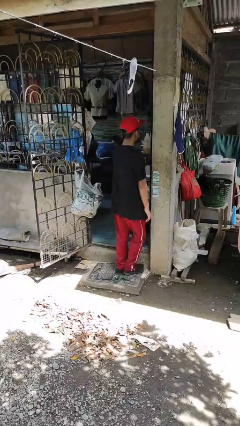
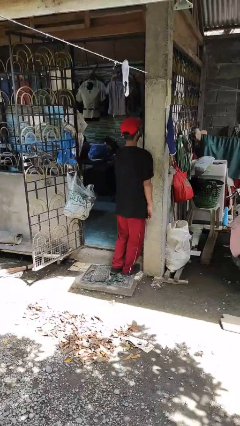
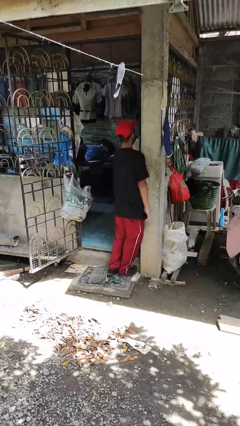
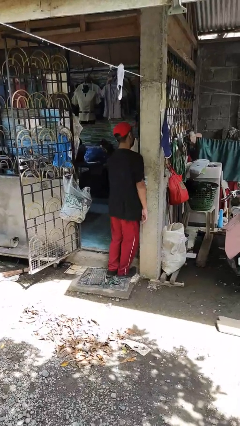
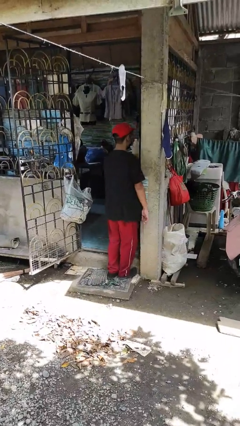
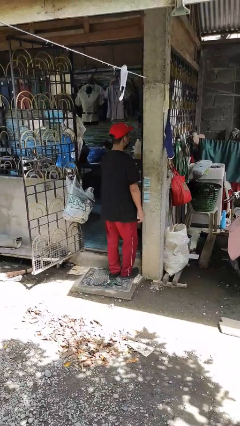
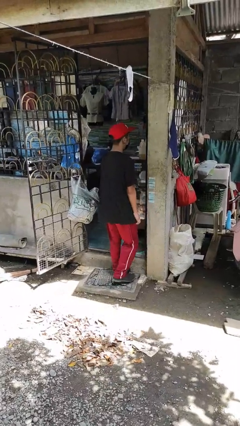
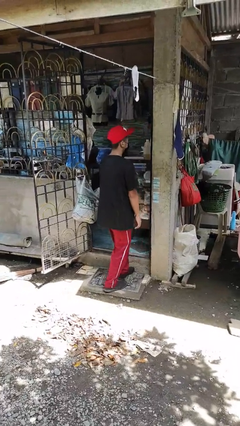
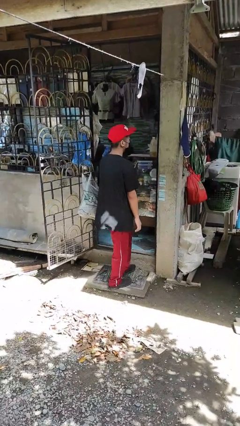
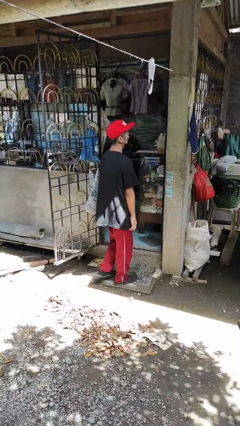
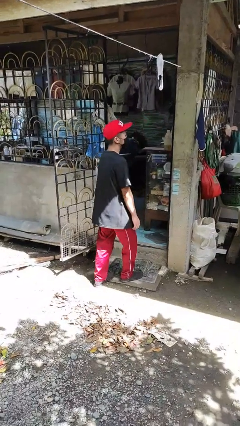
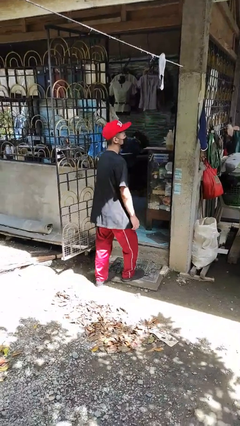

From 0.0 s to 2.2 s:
person bumps into wall

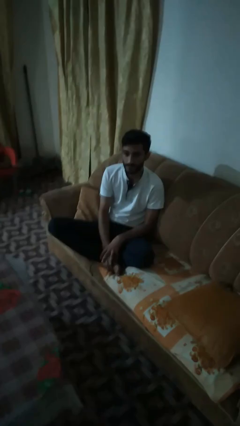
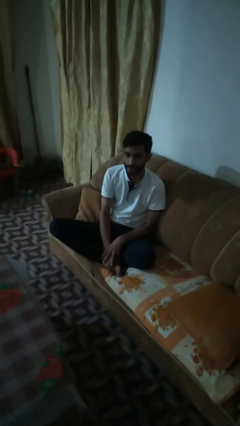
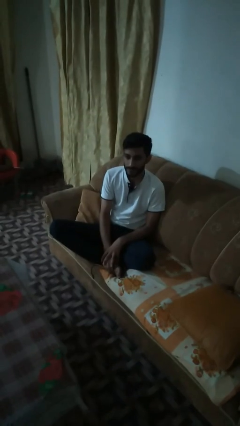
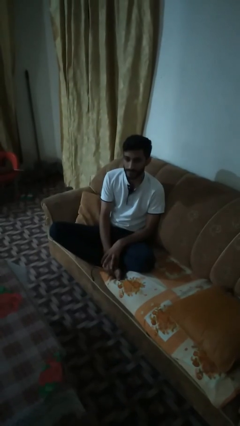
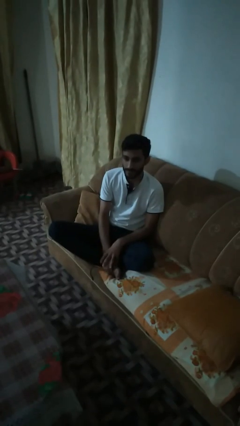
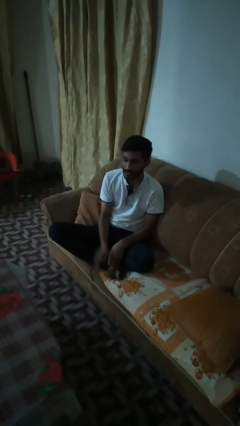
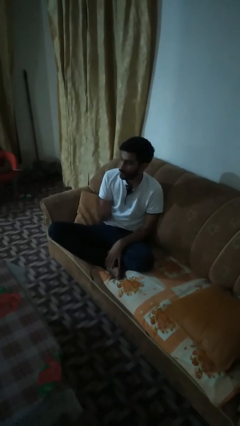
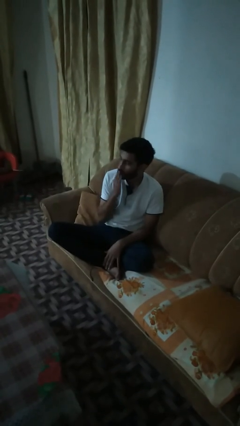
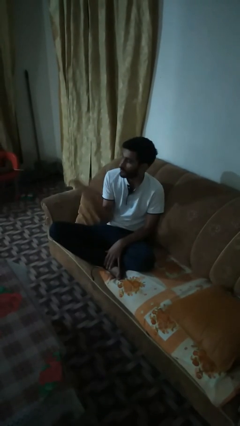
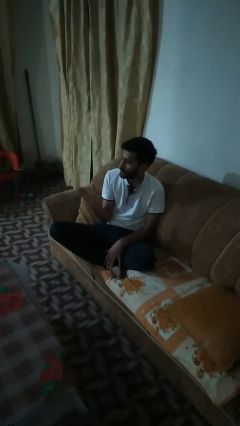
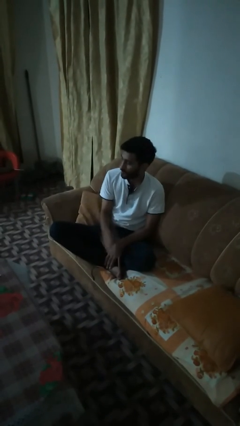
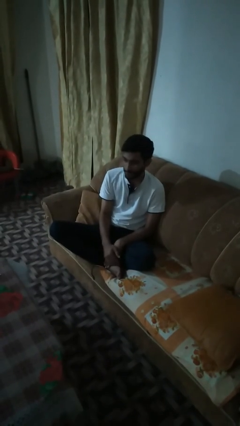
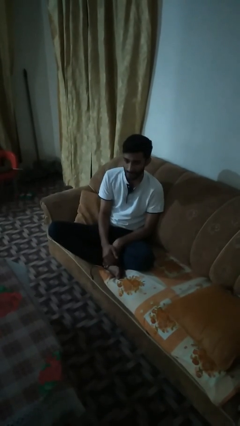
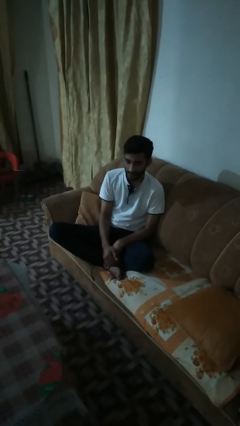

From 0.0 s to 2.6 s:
person gestures blow kiss

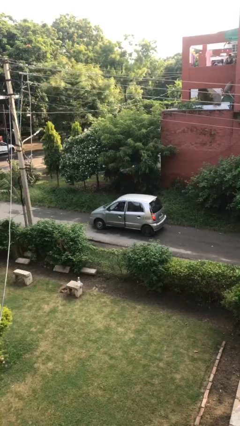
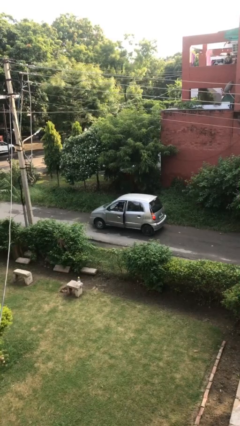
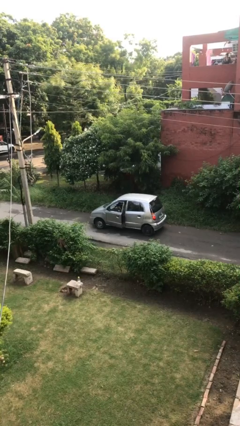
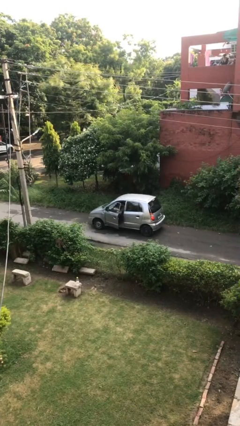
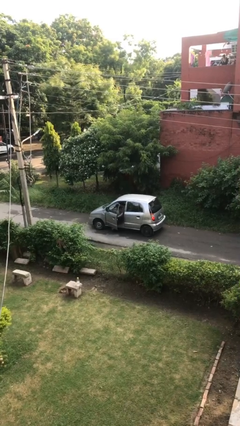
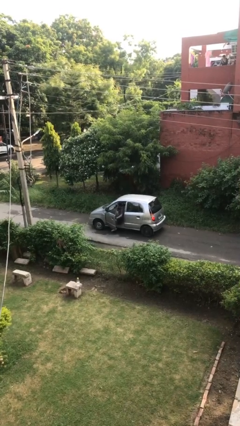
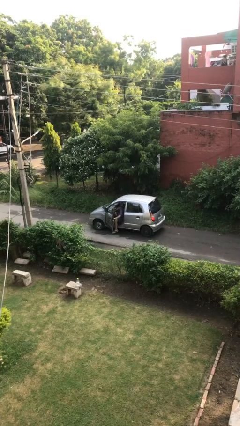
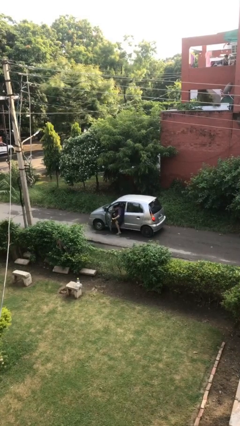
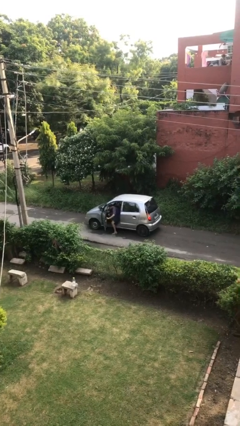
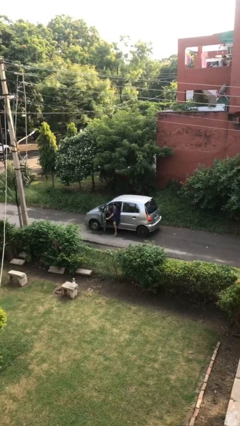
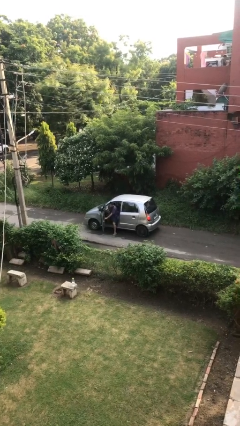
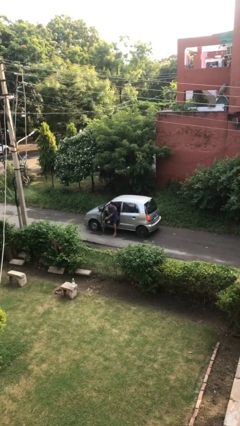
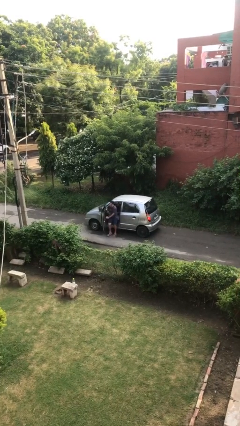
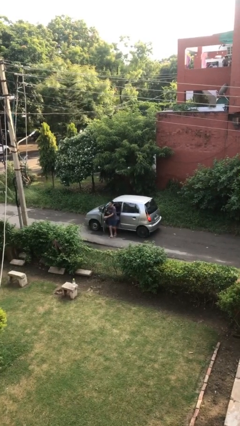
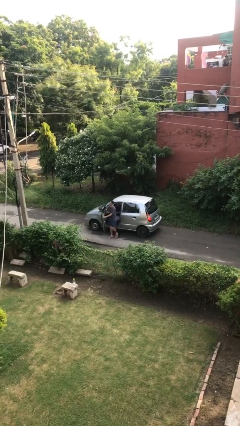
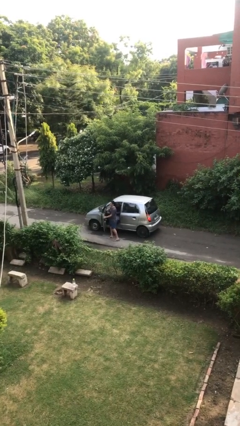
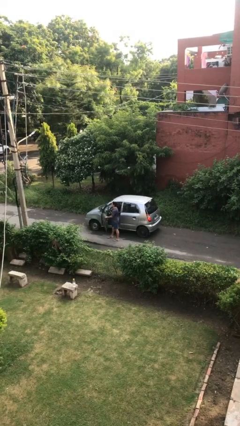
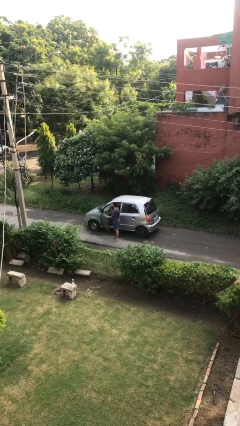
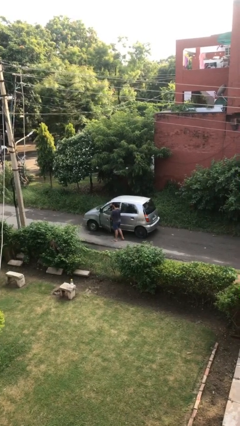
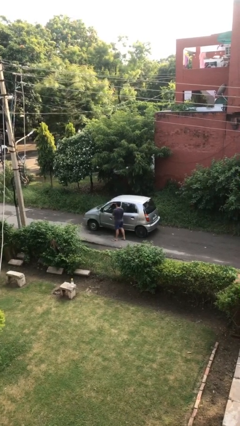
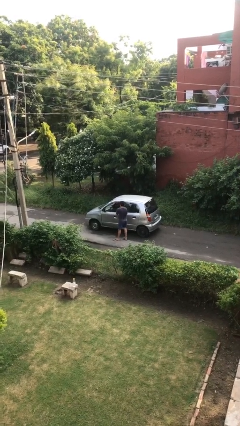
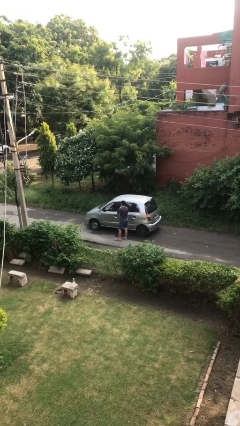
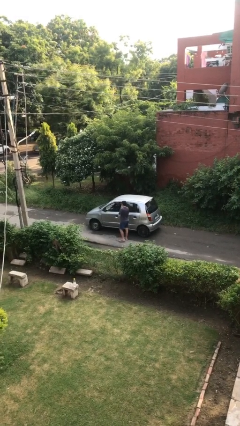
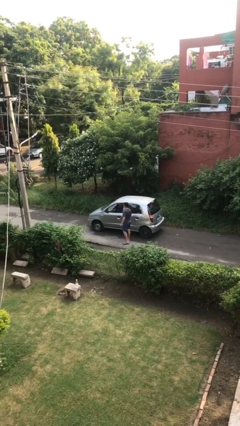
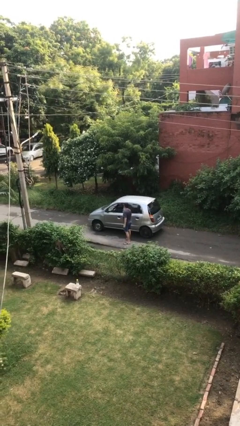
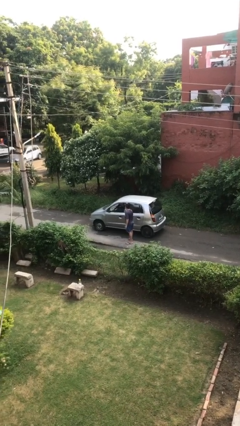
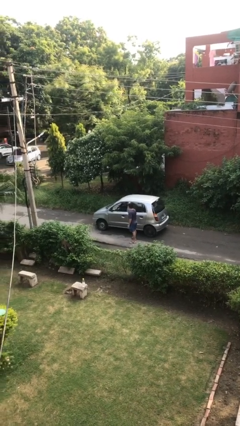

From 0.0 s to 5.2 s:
car drops off person

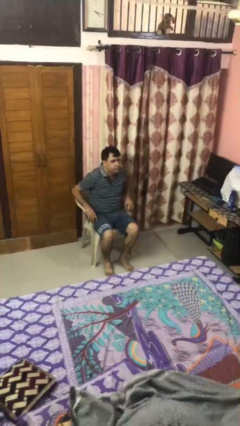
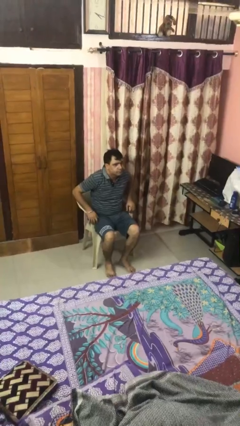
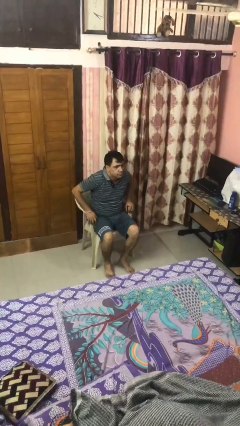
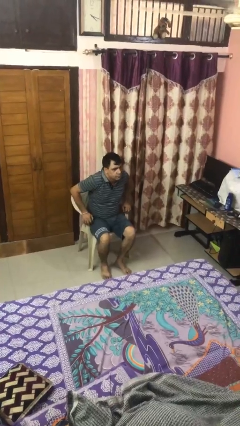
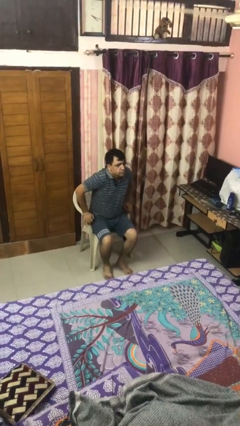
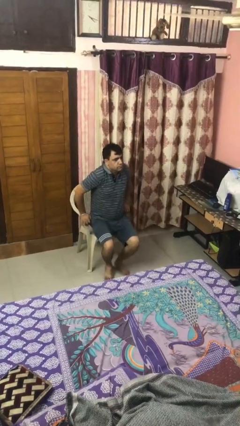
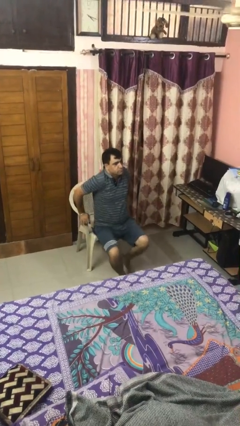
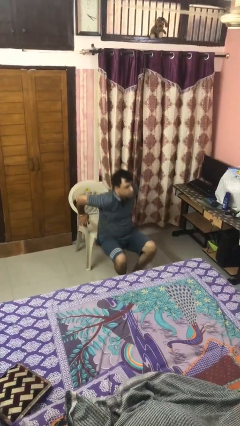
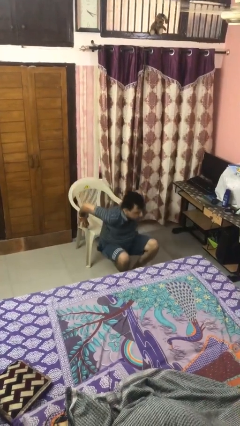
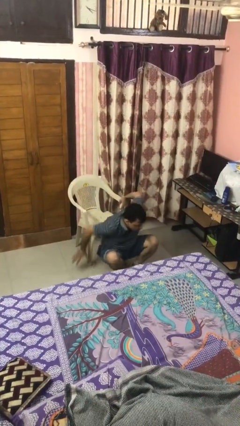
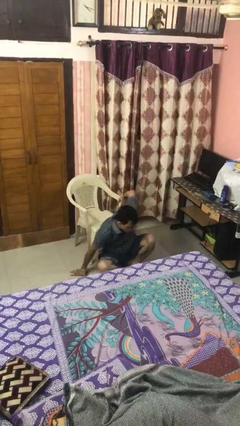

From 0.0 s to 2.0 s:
person falls from chair

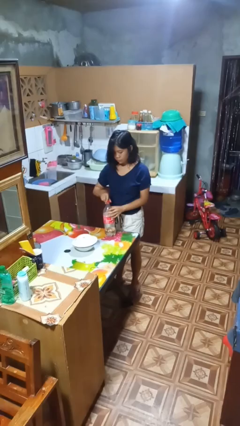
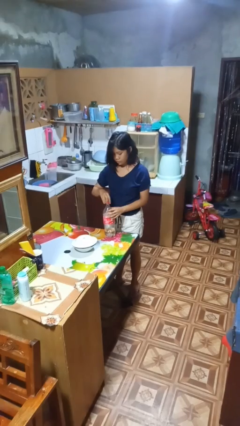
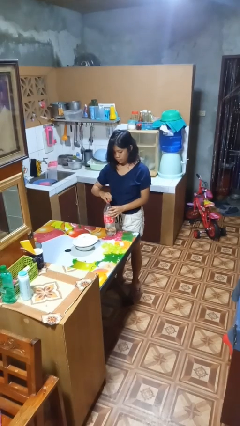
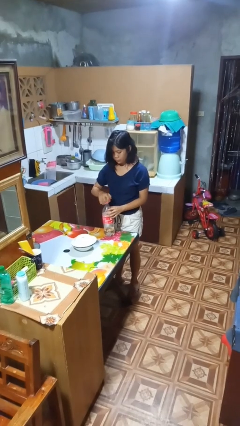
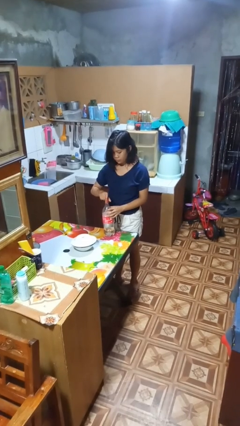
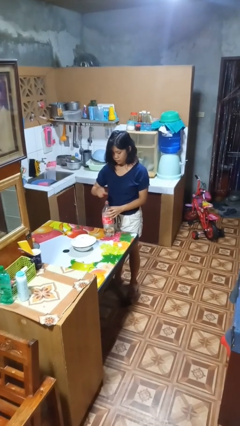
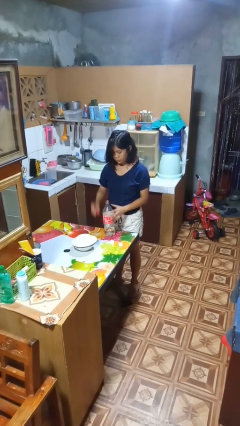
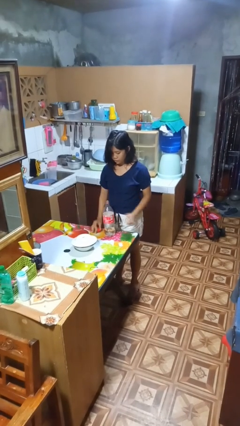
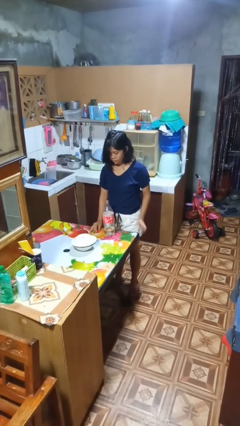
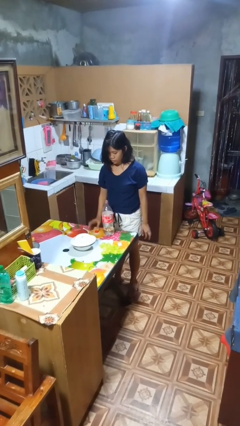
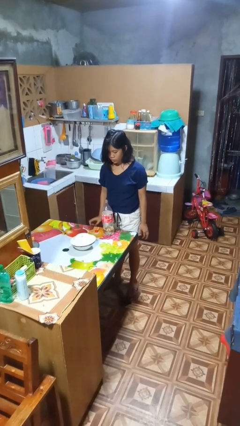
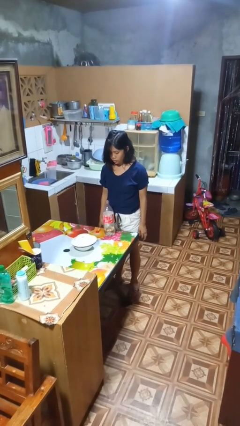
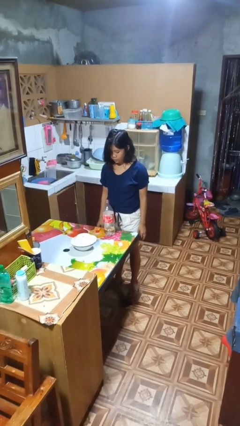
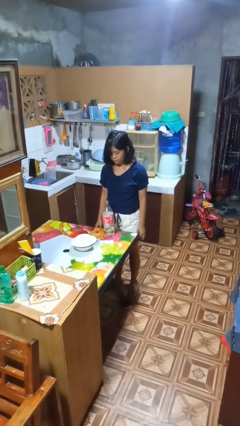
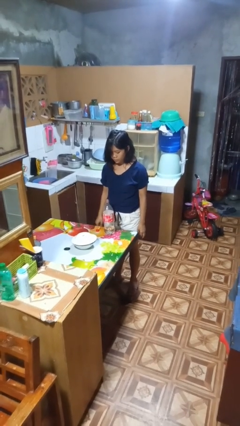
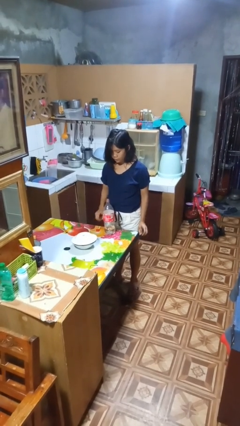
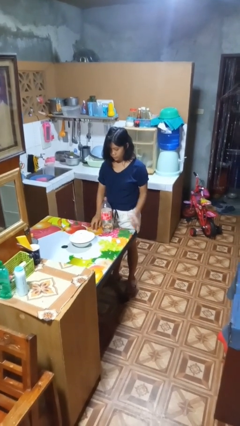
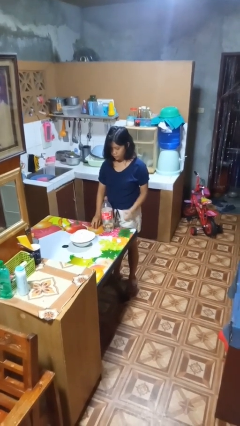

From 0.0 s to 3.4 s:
person unscrews lid from bottle

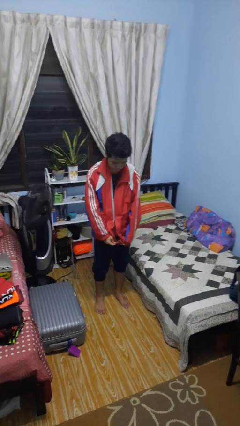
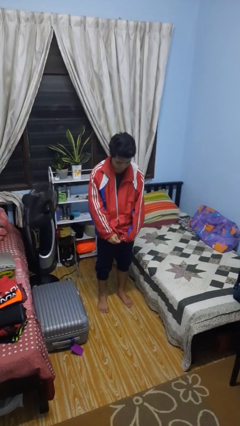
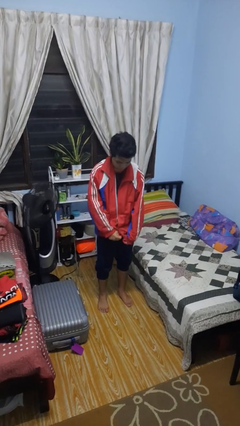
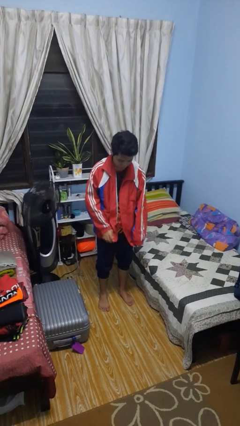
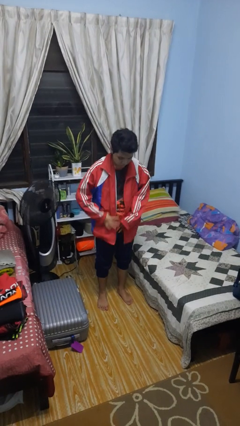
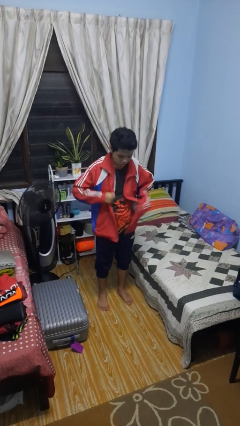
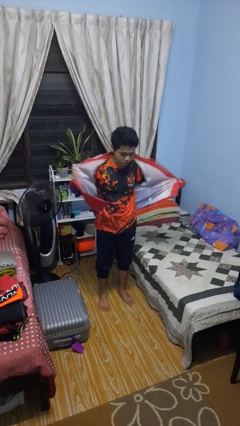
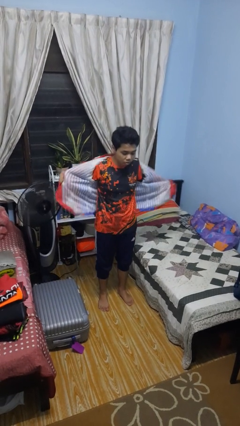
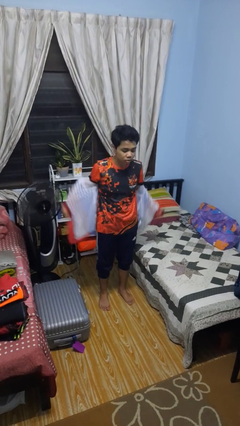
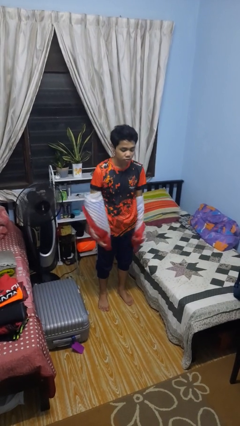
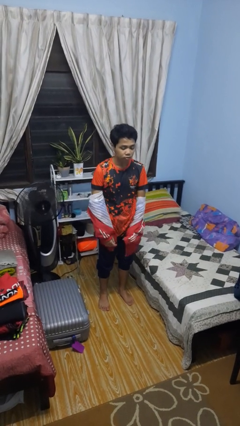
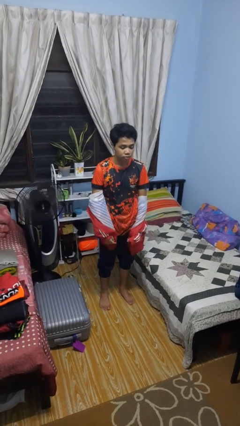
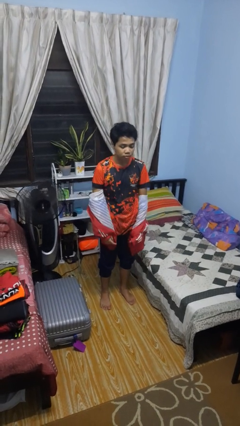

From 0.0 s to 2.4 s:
person takes off jacket
